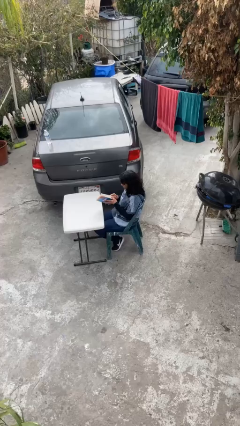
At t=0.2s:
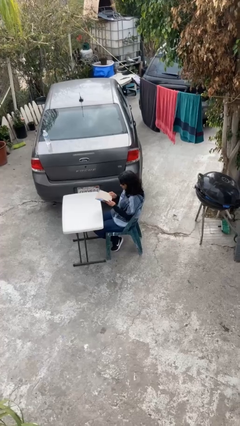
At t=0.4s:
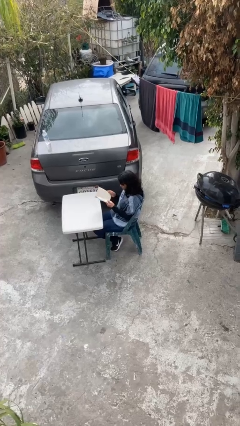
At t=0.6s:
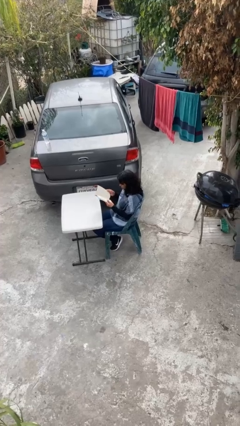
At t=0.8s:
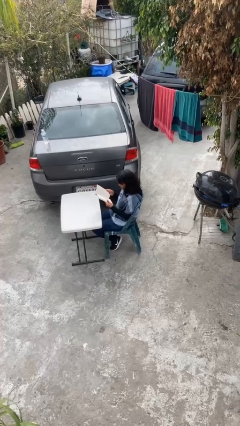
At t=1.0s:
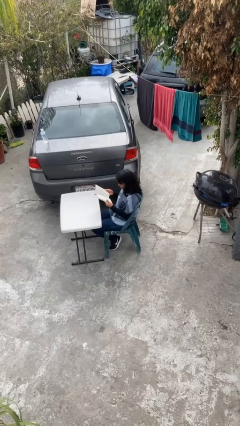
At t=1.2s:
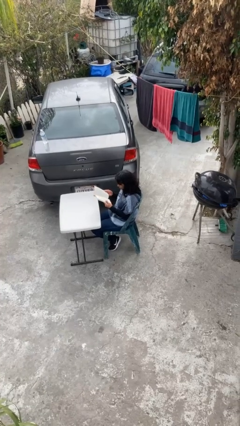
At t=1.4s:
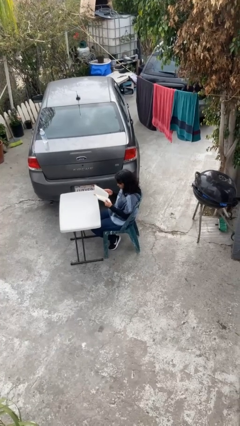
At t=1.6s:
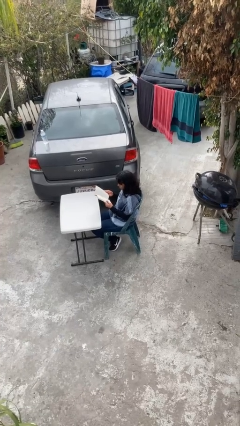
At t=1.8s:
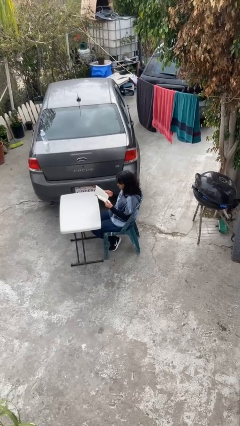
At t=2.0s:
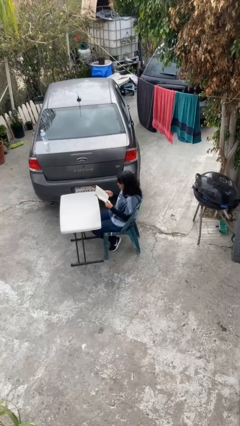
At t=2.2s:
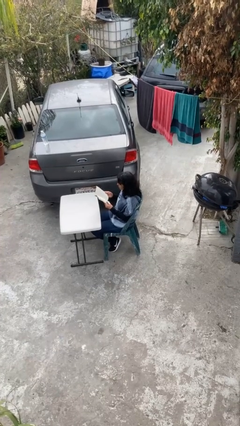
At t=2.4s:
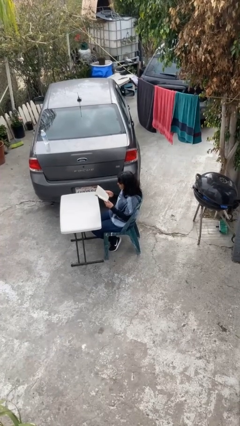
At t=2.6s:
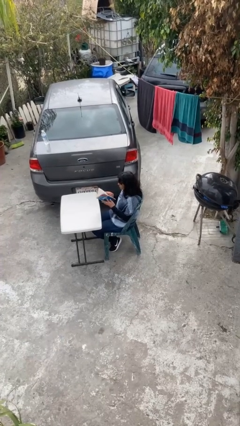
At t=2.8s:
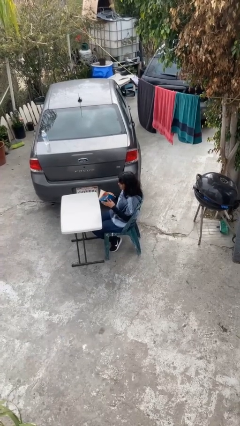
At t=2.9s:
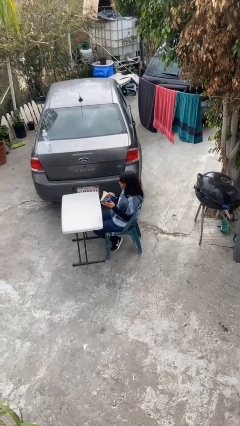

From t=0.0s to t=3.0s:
person reads document

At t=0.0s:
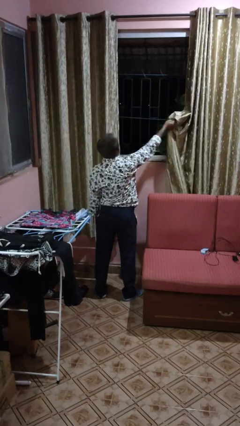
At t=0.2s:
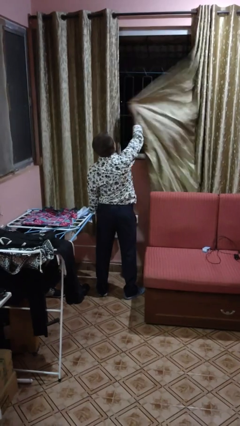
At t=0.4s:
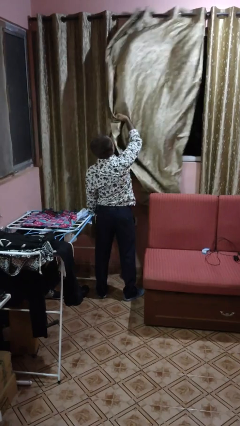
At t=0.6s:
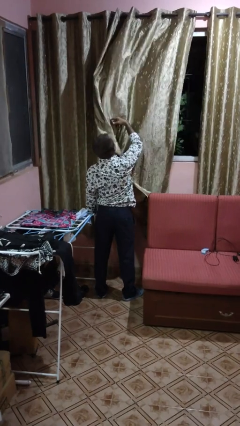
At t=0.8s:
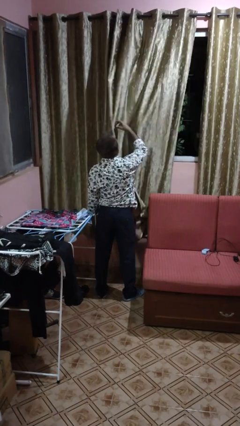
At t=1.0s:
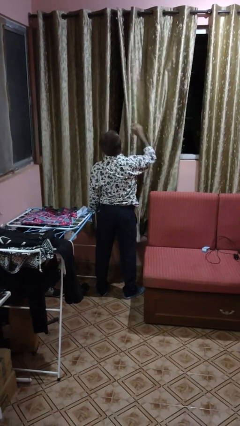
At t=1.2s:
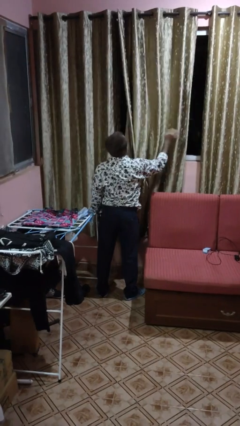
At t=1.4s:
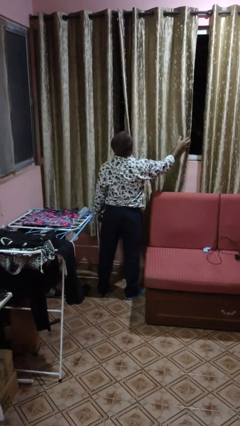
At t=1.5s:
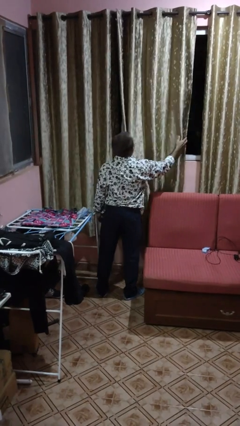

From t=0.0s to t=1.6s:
person closes curtains

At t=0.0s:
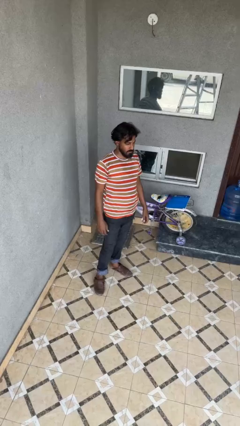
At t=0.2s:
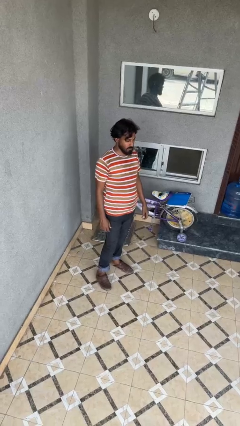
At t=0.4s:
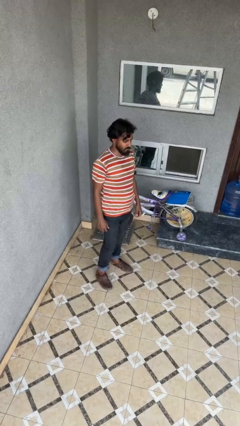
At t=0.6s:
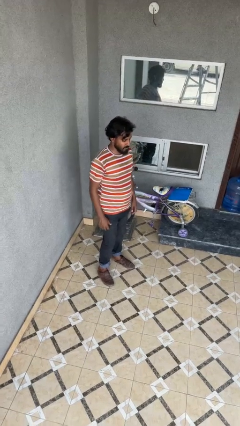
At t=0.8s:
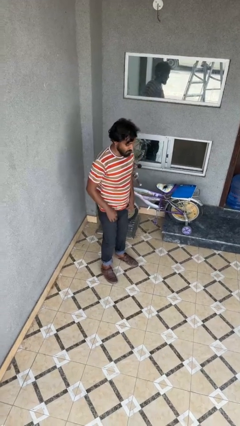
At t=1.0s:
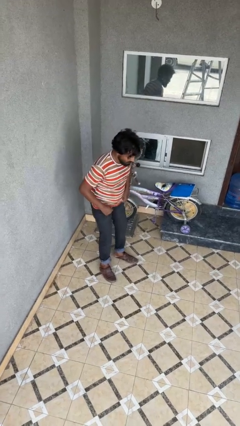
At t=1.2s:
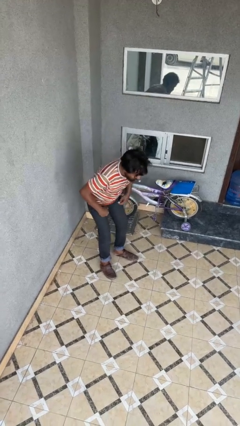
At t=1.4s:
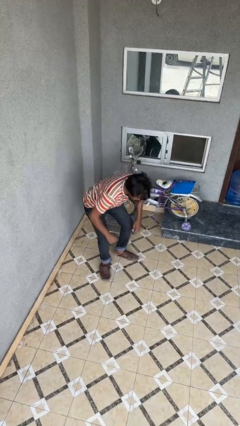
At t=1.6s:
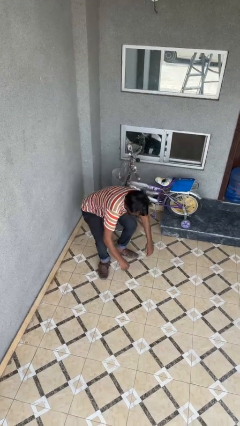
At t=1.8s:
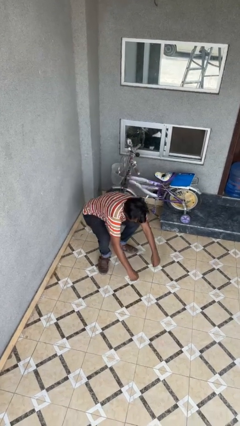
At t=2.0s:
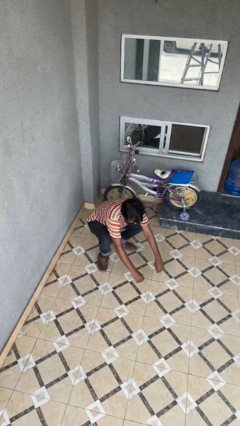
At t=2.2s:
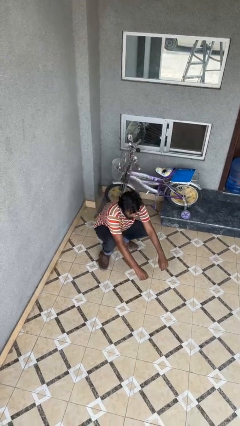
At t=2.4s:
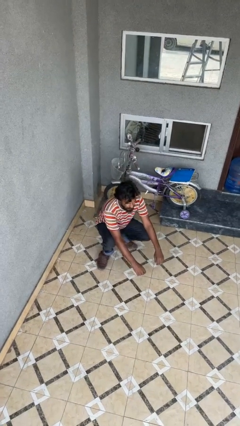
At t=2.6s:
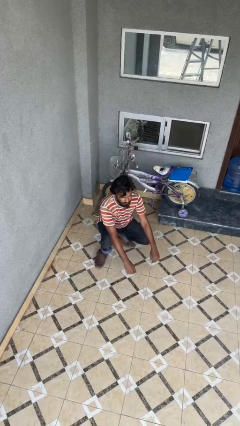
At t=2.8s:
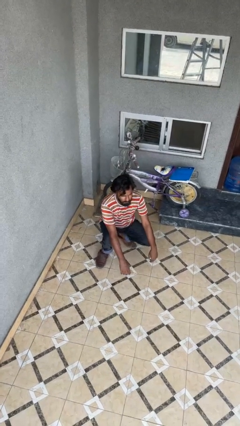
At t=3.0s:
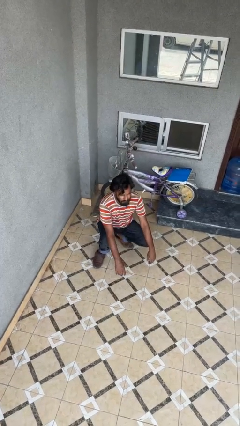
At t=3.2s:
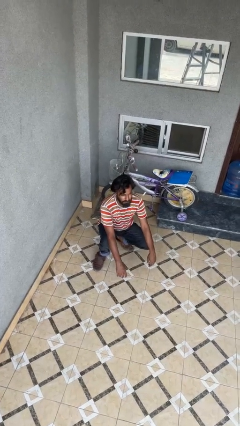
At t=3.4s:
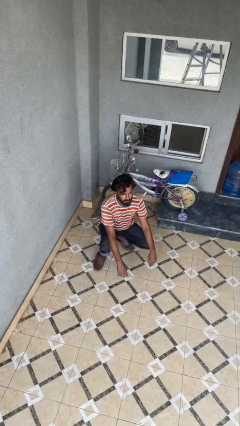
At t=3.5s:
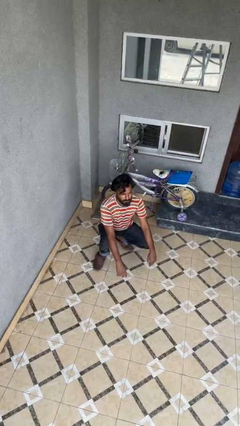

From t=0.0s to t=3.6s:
person squats

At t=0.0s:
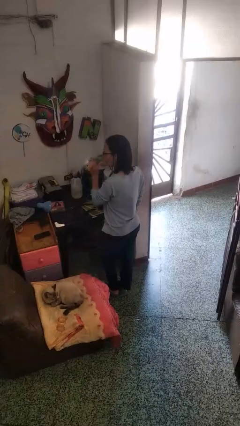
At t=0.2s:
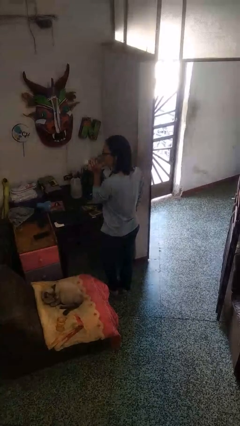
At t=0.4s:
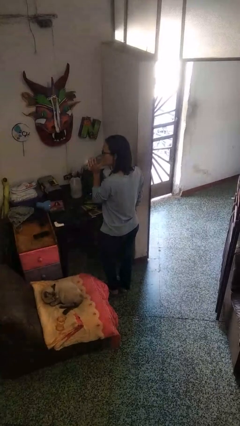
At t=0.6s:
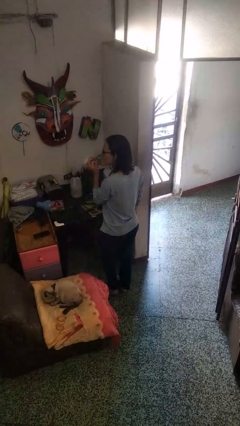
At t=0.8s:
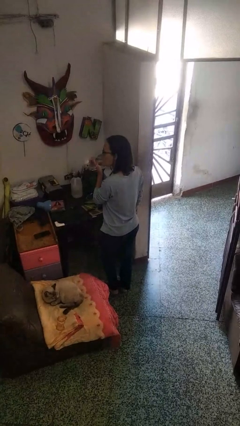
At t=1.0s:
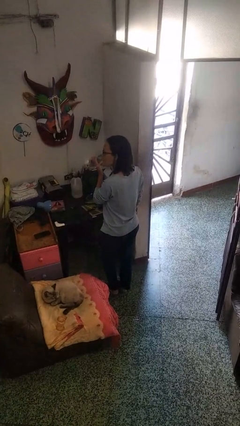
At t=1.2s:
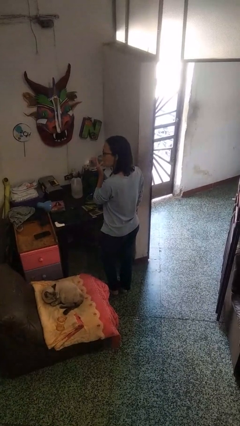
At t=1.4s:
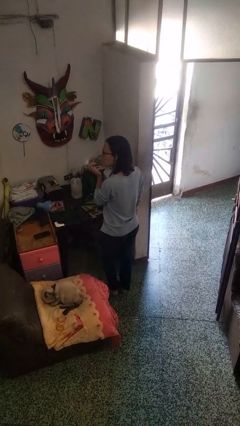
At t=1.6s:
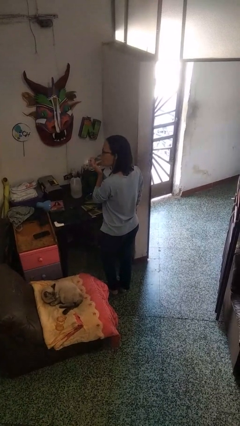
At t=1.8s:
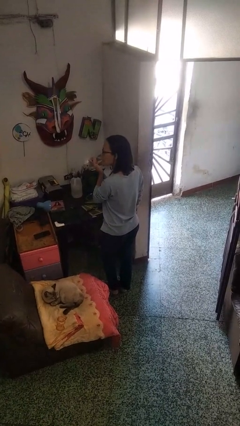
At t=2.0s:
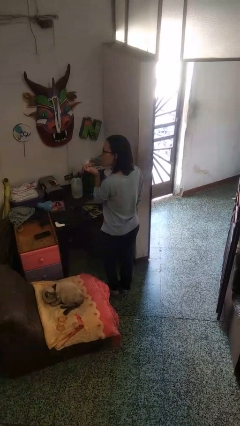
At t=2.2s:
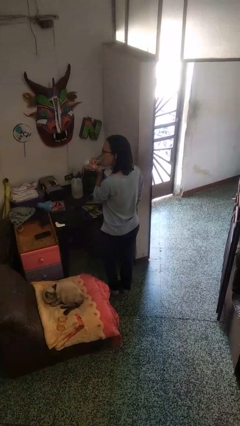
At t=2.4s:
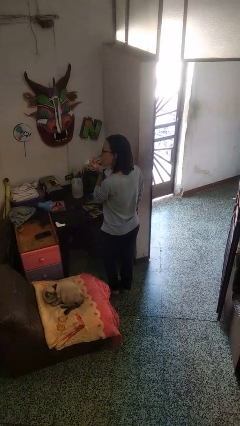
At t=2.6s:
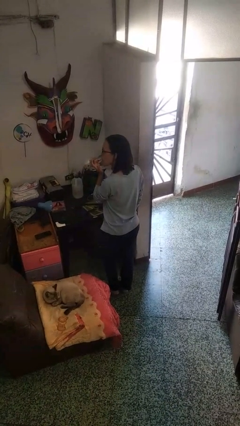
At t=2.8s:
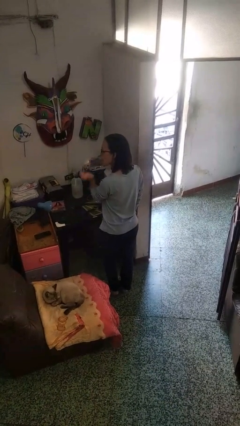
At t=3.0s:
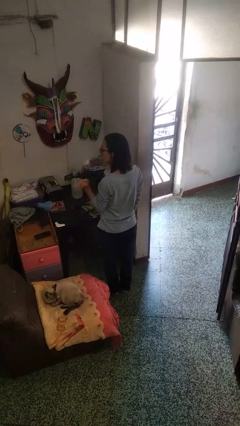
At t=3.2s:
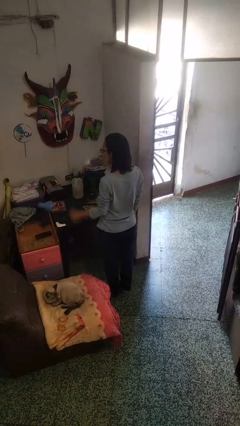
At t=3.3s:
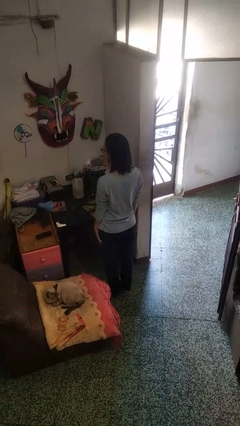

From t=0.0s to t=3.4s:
person licks fingers

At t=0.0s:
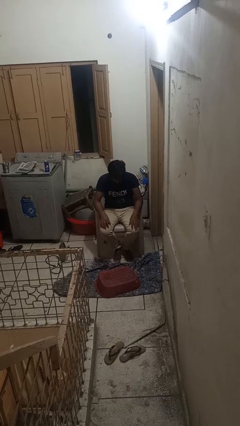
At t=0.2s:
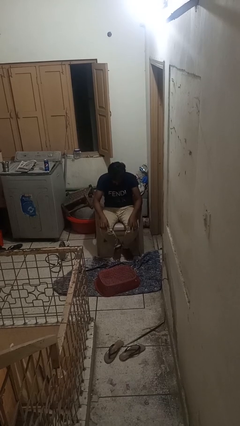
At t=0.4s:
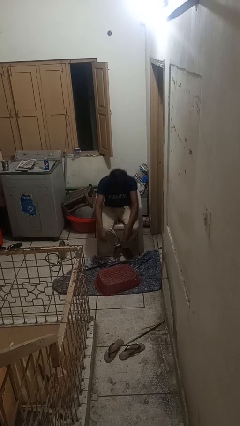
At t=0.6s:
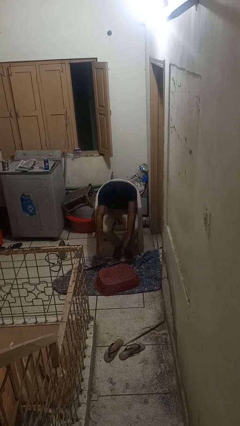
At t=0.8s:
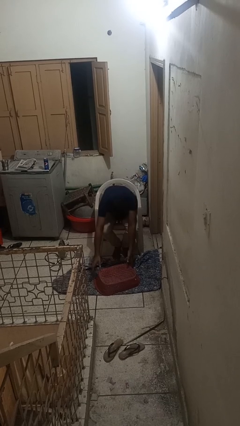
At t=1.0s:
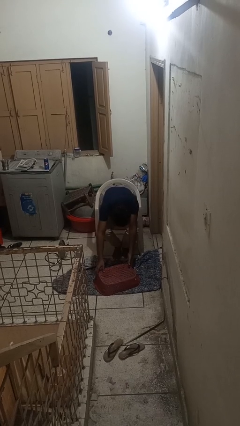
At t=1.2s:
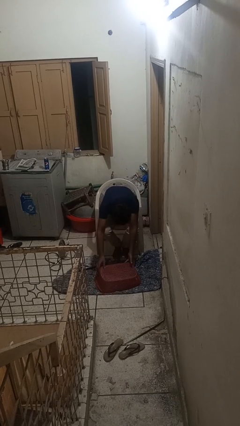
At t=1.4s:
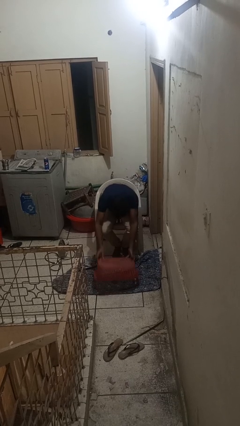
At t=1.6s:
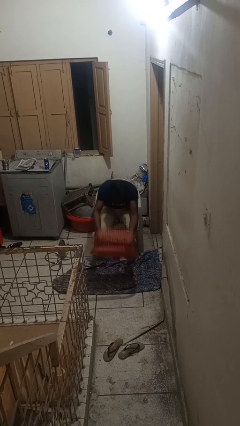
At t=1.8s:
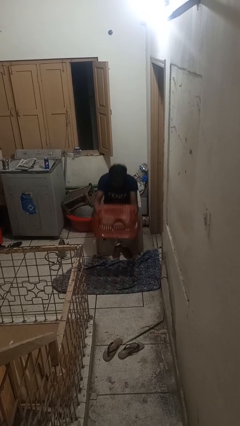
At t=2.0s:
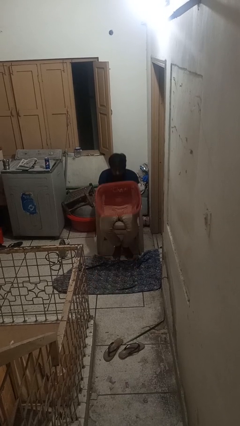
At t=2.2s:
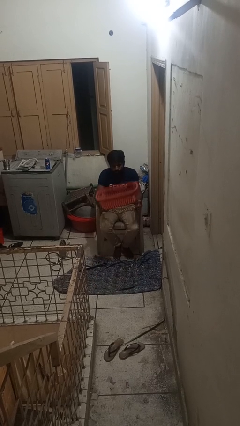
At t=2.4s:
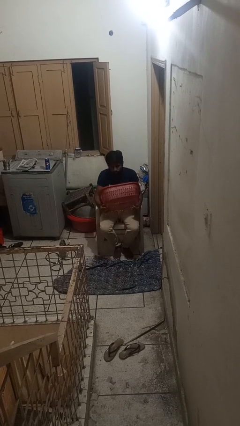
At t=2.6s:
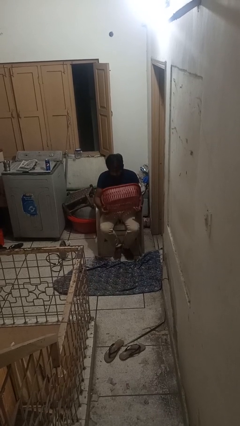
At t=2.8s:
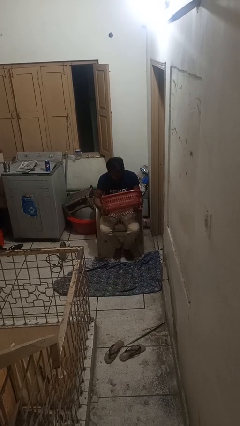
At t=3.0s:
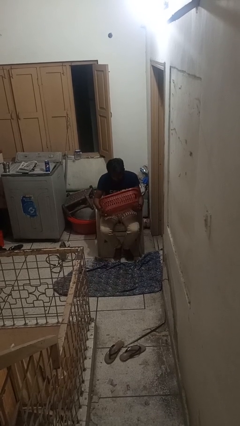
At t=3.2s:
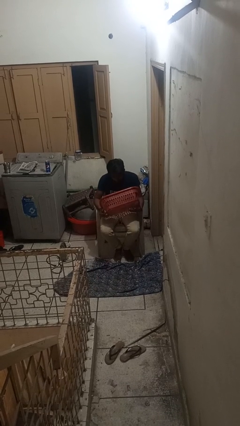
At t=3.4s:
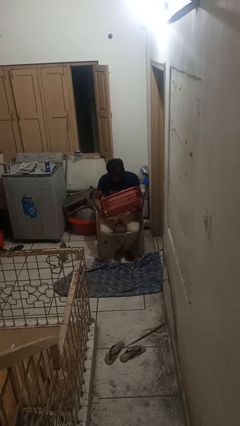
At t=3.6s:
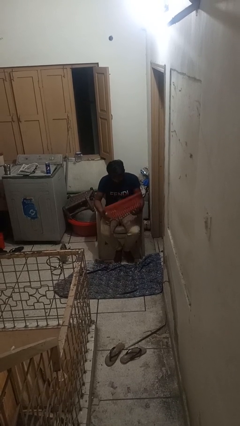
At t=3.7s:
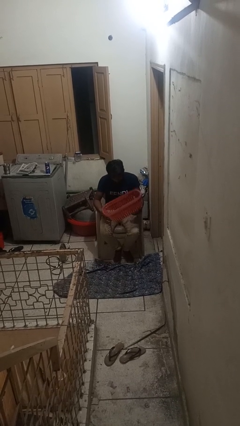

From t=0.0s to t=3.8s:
person picks up object from floor

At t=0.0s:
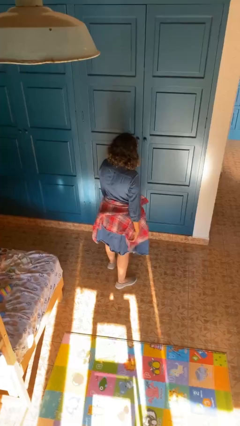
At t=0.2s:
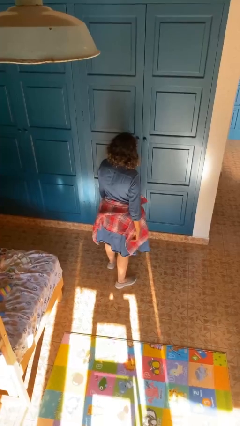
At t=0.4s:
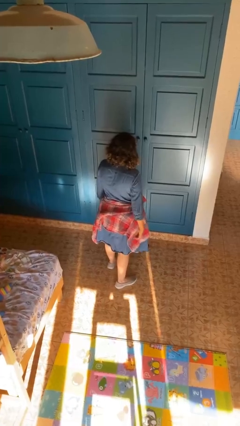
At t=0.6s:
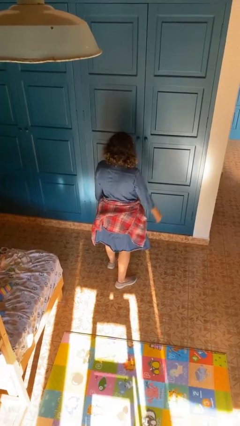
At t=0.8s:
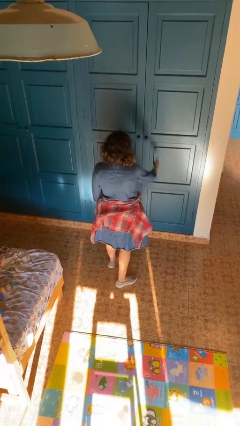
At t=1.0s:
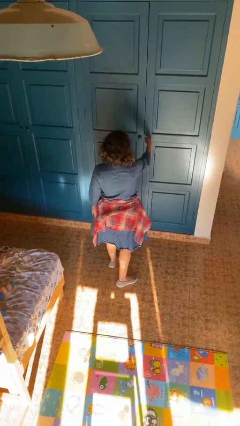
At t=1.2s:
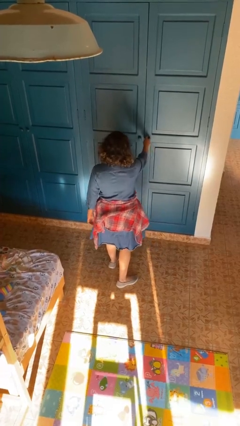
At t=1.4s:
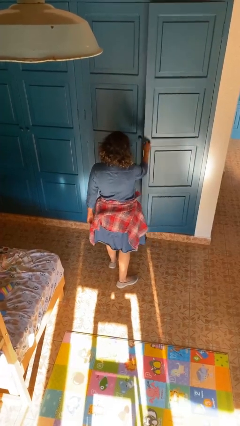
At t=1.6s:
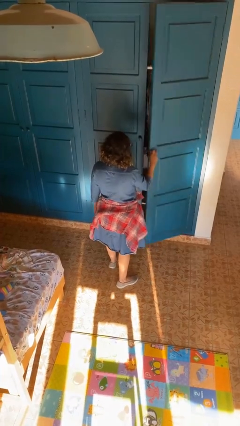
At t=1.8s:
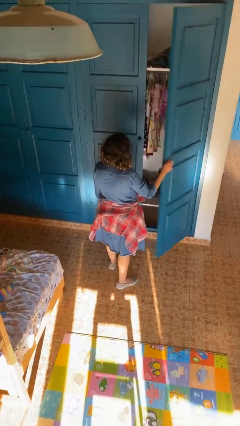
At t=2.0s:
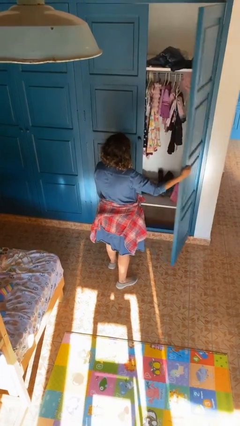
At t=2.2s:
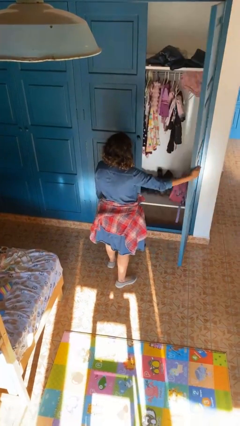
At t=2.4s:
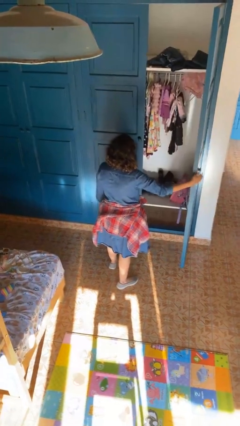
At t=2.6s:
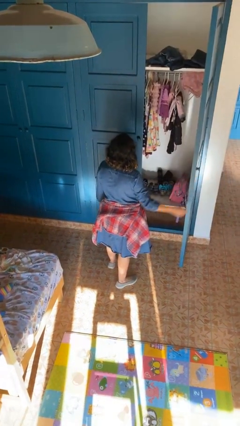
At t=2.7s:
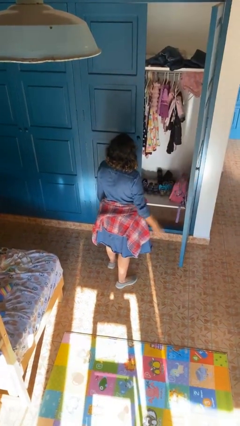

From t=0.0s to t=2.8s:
person opens closet door
